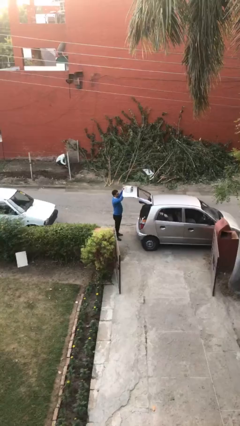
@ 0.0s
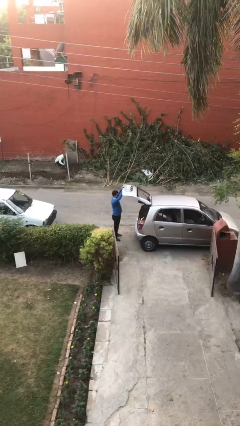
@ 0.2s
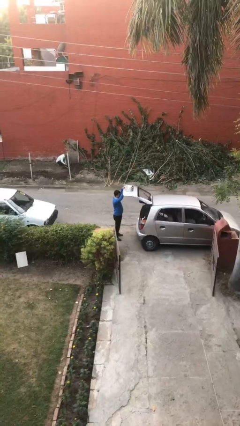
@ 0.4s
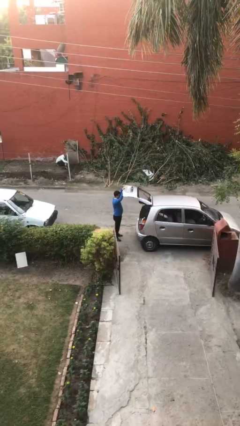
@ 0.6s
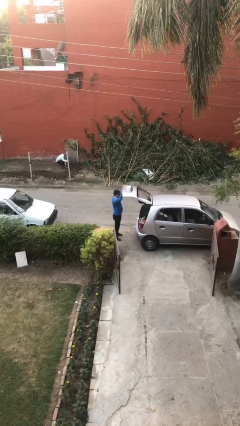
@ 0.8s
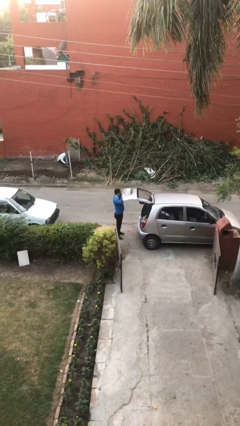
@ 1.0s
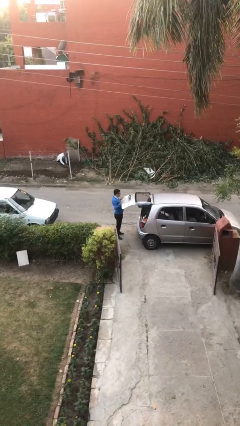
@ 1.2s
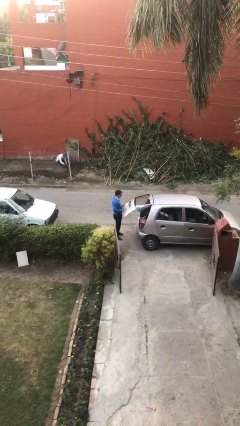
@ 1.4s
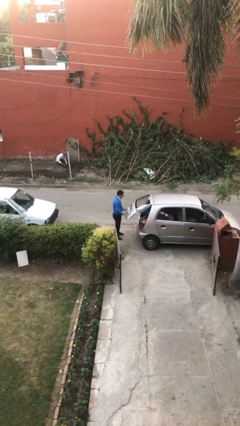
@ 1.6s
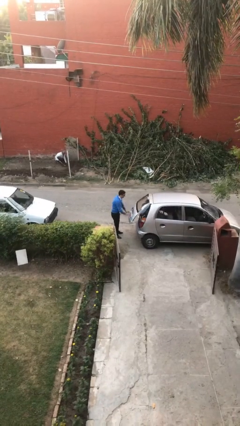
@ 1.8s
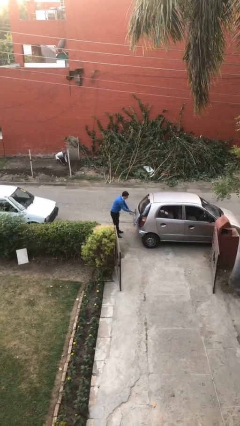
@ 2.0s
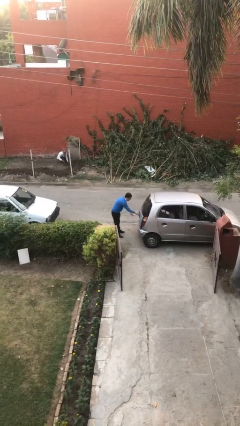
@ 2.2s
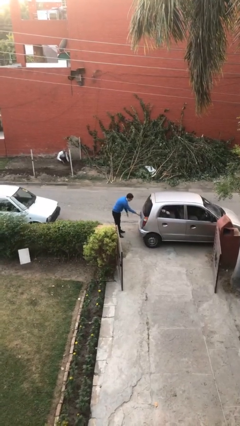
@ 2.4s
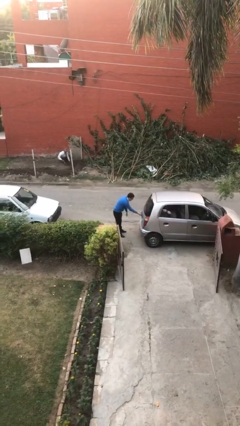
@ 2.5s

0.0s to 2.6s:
person closes car trunk

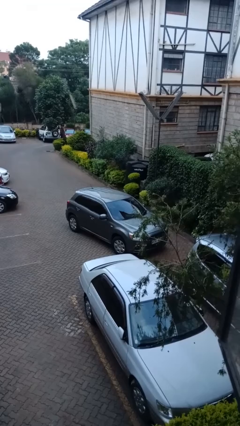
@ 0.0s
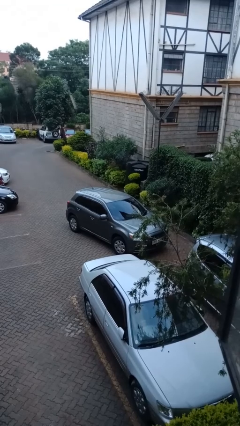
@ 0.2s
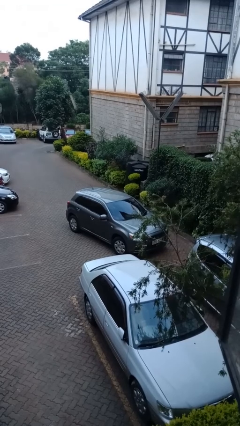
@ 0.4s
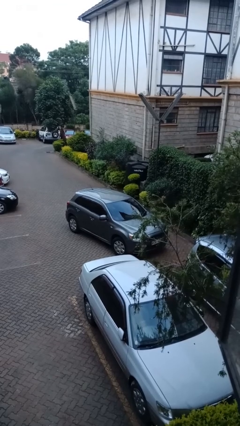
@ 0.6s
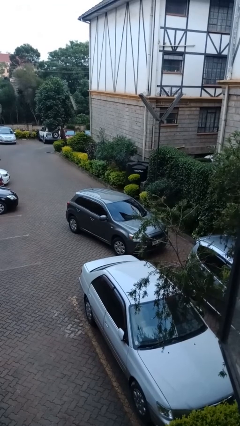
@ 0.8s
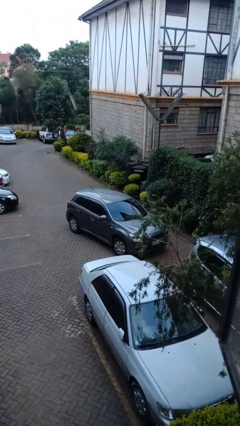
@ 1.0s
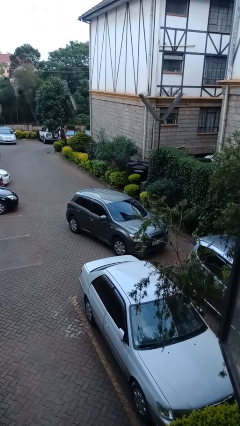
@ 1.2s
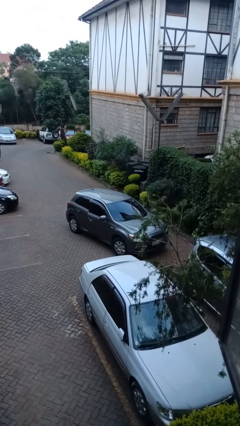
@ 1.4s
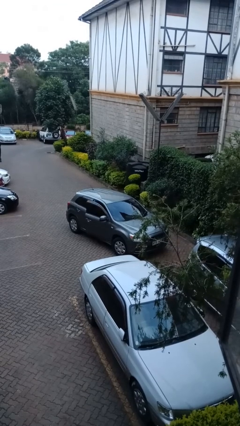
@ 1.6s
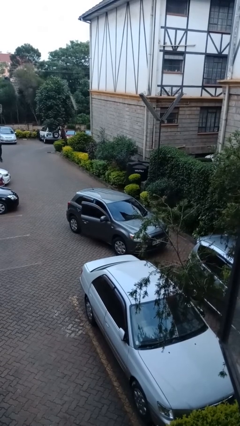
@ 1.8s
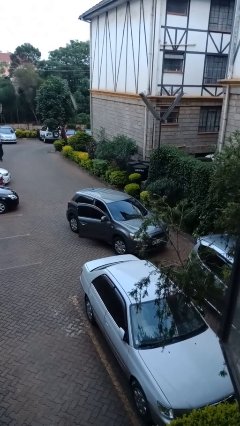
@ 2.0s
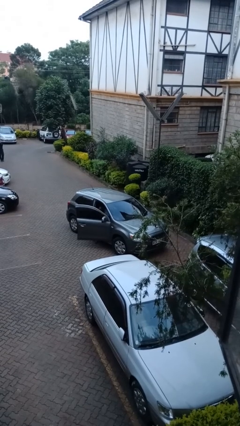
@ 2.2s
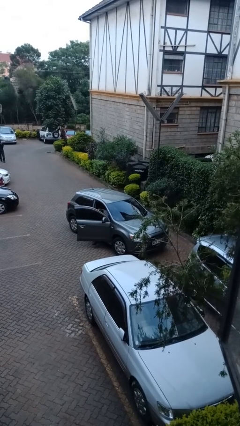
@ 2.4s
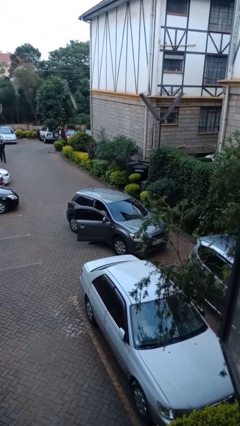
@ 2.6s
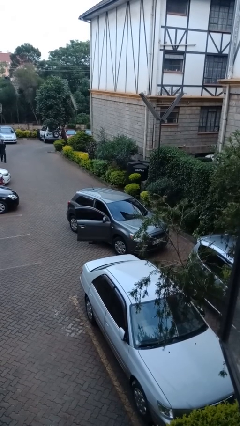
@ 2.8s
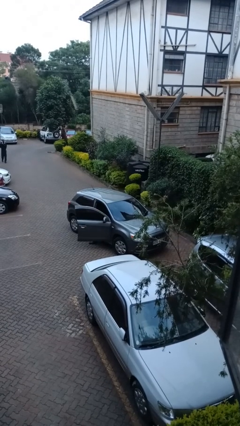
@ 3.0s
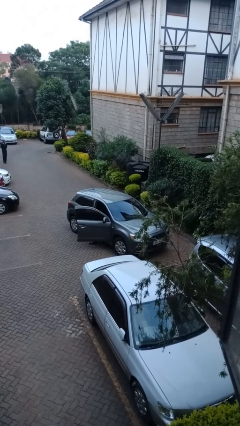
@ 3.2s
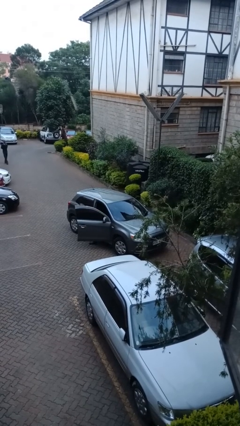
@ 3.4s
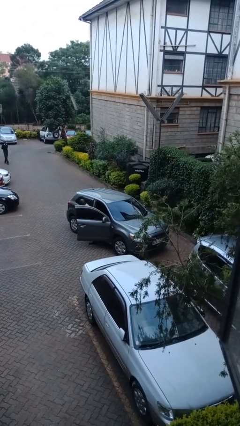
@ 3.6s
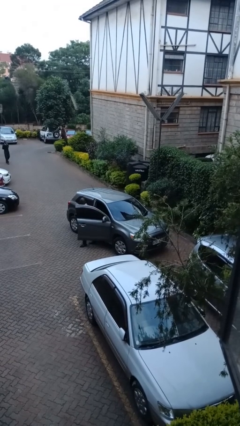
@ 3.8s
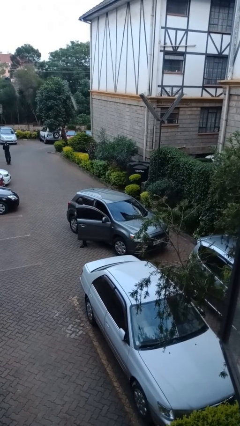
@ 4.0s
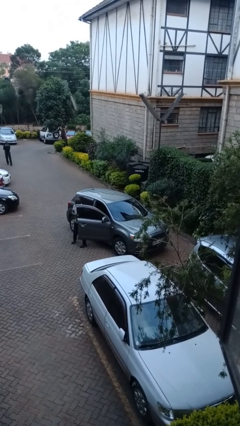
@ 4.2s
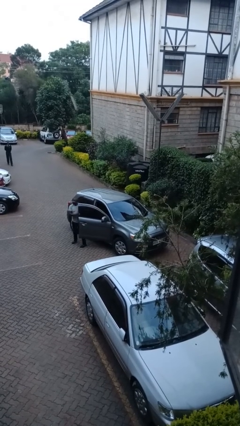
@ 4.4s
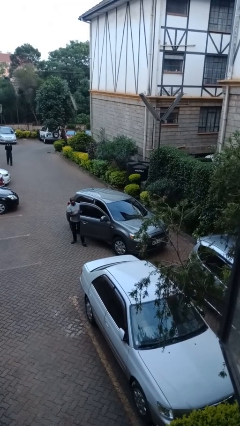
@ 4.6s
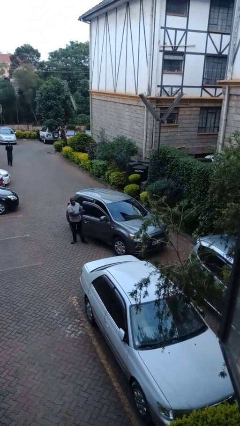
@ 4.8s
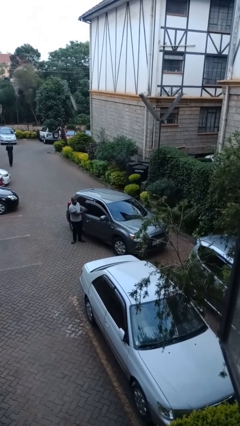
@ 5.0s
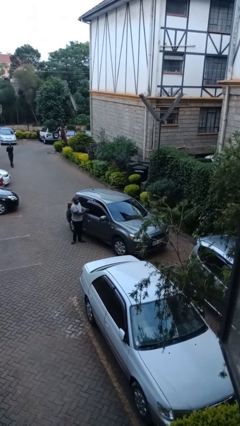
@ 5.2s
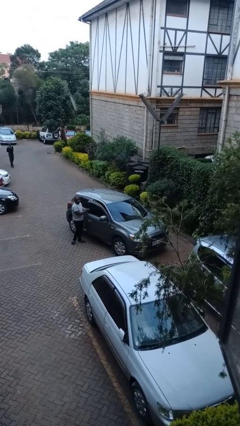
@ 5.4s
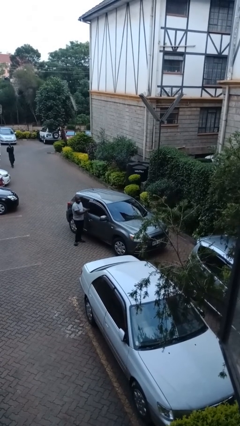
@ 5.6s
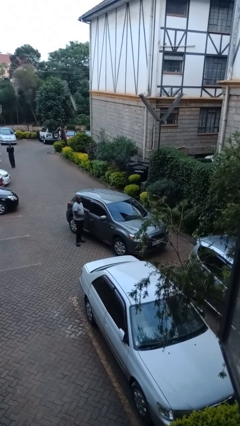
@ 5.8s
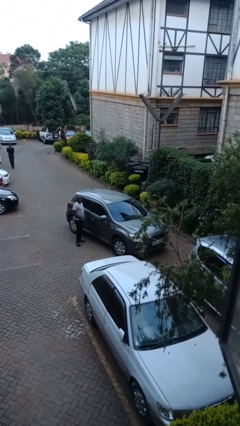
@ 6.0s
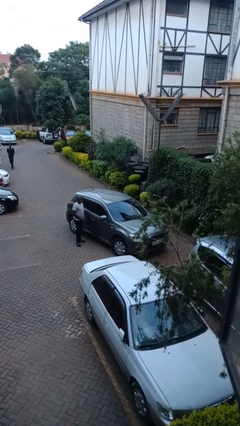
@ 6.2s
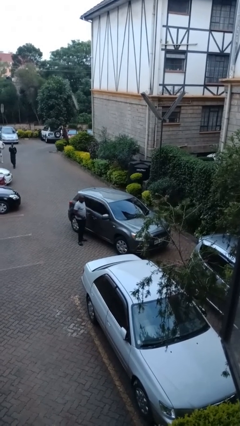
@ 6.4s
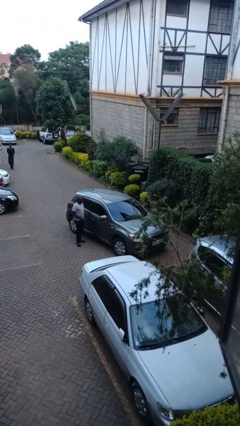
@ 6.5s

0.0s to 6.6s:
car drops off person

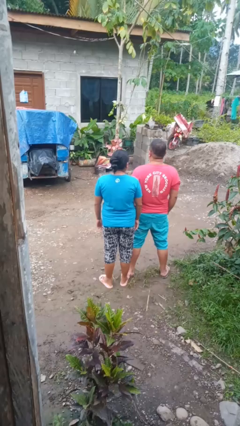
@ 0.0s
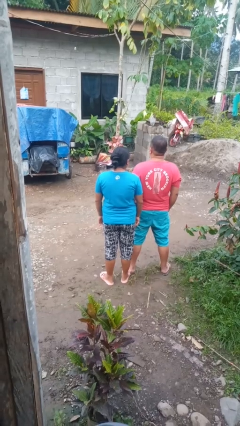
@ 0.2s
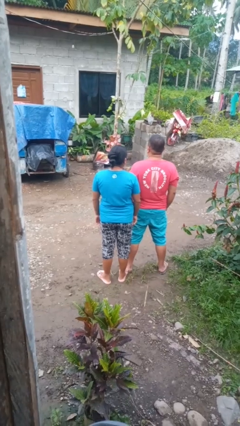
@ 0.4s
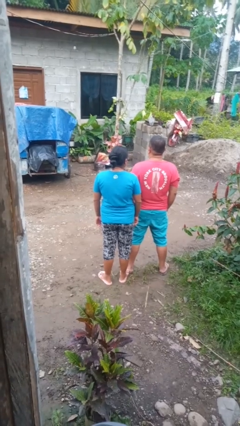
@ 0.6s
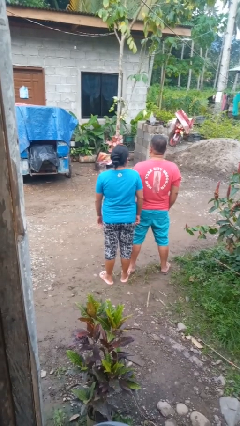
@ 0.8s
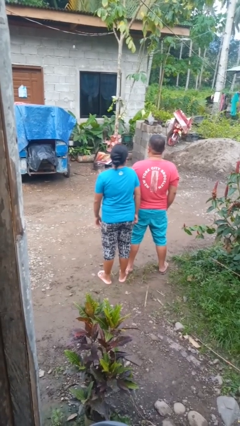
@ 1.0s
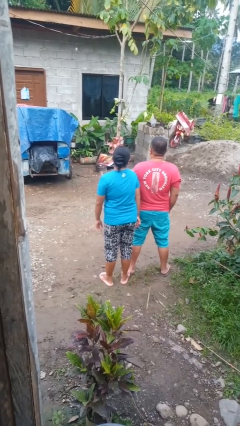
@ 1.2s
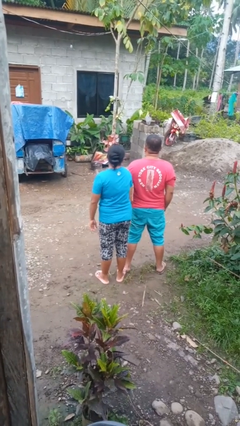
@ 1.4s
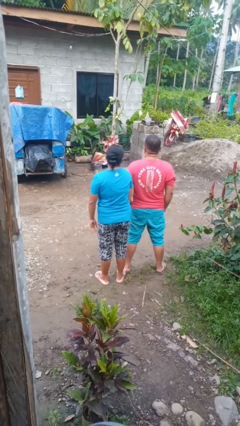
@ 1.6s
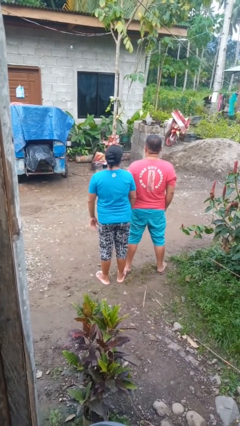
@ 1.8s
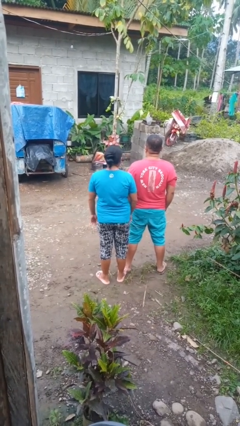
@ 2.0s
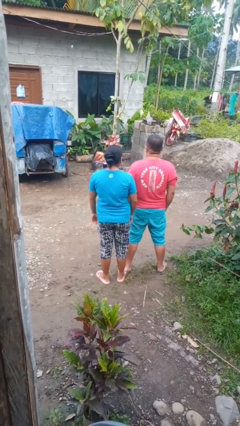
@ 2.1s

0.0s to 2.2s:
person nudges person with elbow

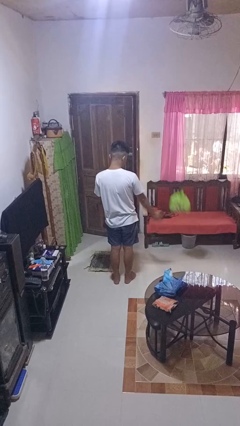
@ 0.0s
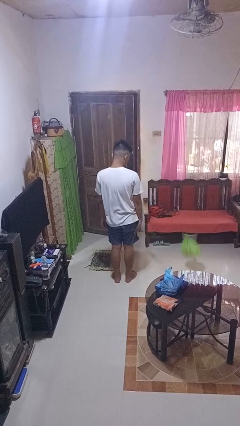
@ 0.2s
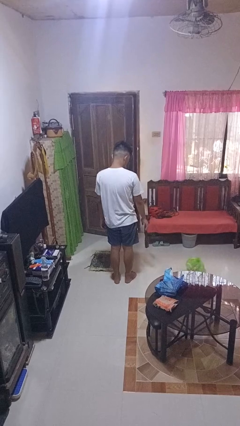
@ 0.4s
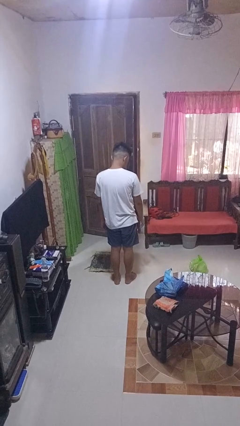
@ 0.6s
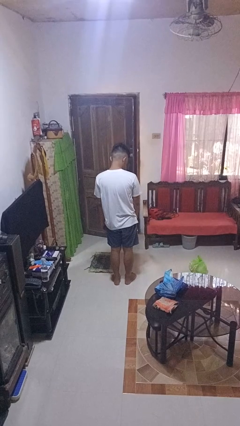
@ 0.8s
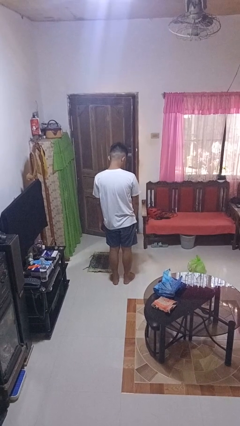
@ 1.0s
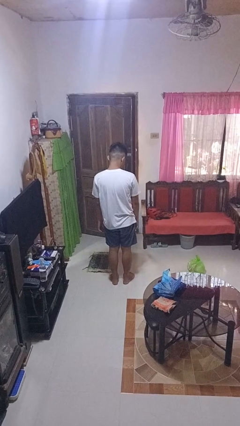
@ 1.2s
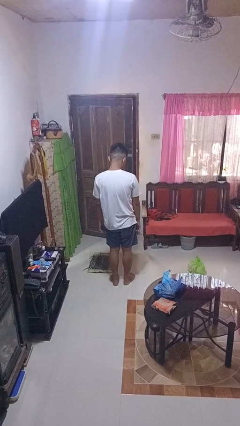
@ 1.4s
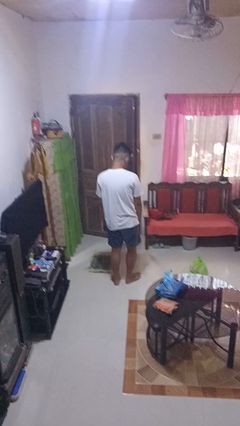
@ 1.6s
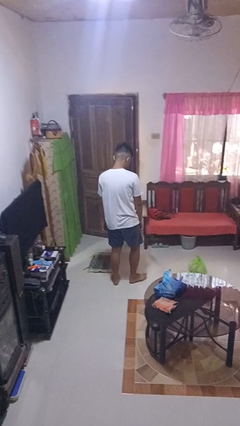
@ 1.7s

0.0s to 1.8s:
person throws object to ground

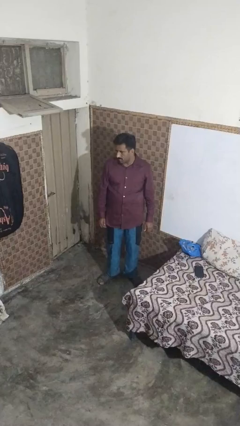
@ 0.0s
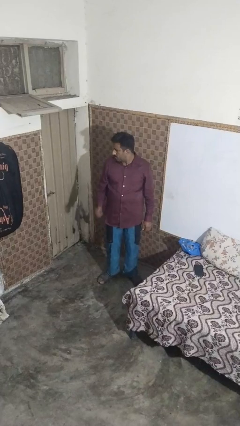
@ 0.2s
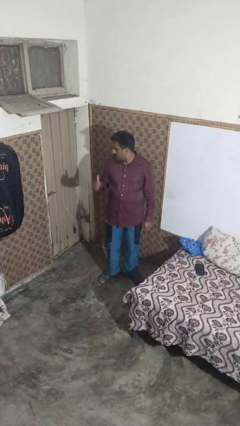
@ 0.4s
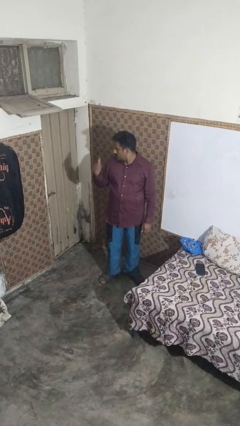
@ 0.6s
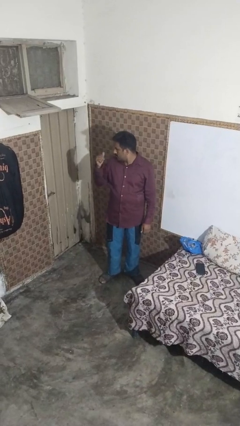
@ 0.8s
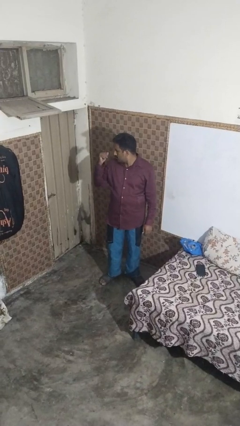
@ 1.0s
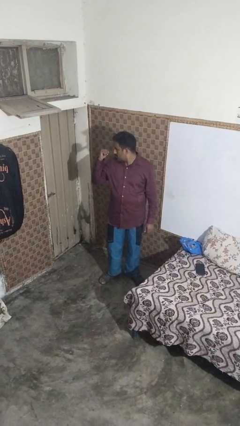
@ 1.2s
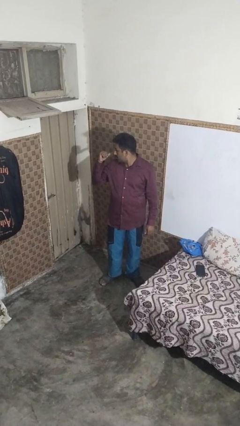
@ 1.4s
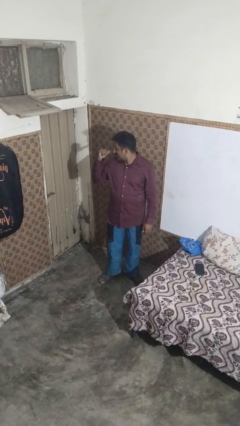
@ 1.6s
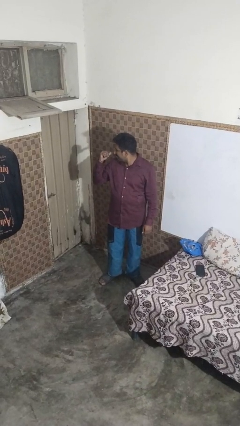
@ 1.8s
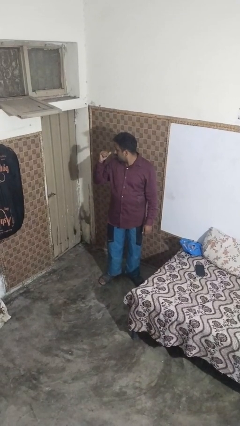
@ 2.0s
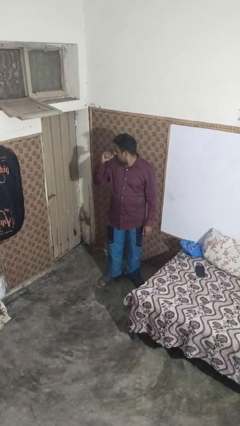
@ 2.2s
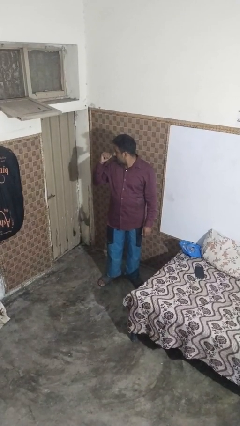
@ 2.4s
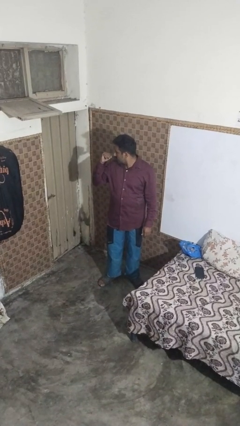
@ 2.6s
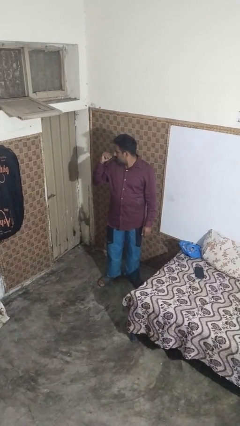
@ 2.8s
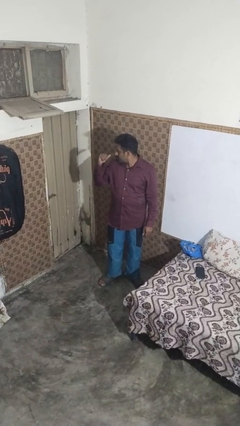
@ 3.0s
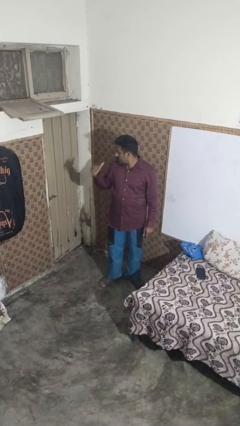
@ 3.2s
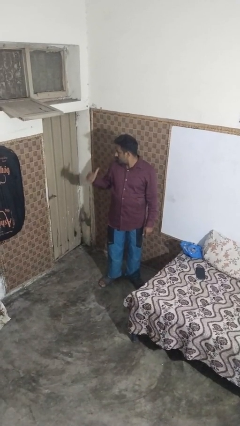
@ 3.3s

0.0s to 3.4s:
person gestures behind me

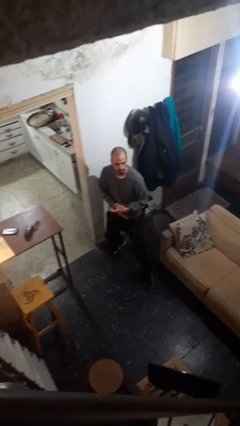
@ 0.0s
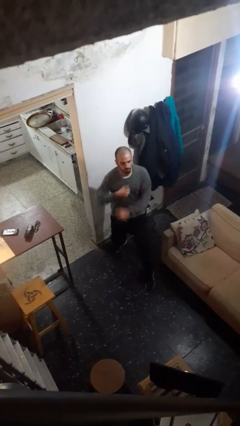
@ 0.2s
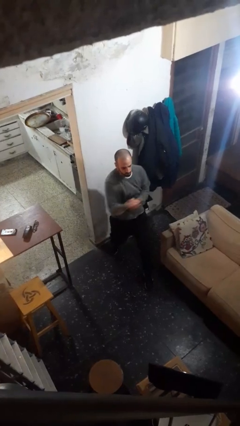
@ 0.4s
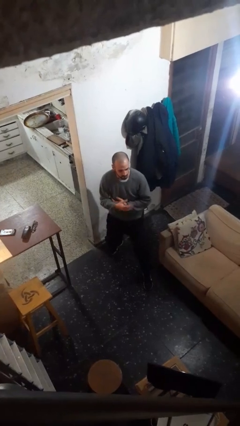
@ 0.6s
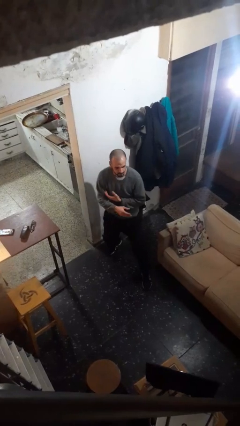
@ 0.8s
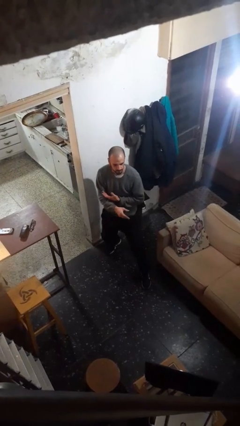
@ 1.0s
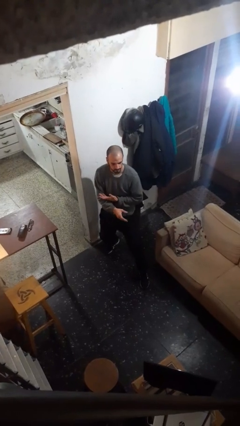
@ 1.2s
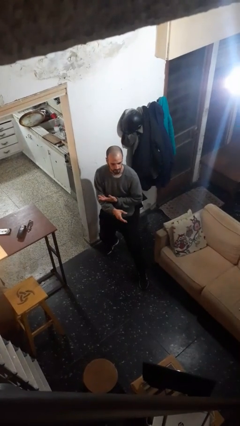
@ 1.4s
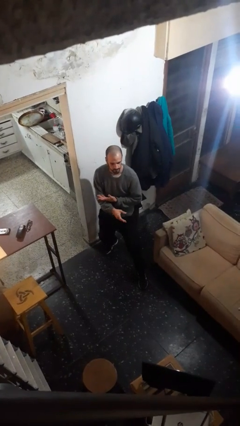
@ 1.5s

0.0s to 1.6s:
person karate chop
